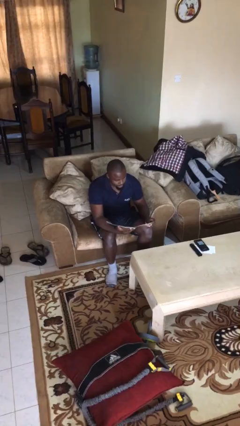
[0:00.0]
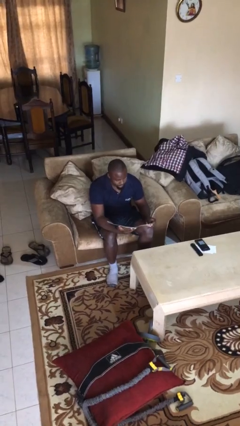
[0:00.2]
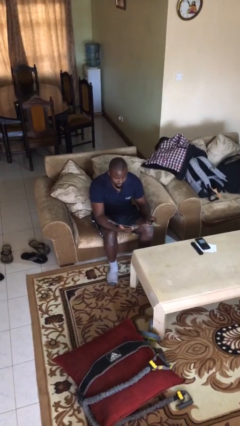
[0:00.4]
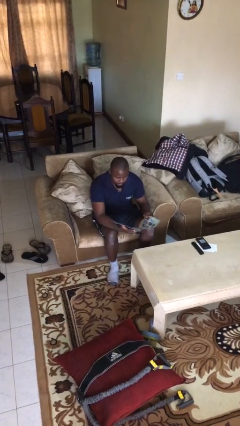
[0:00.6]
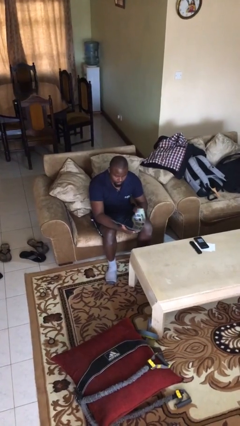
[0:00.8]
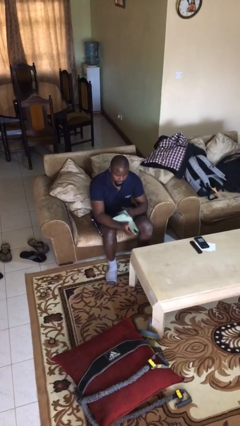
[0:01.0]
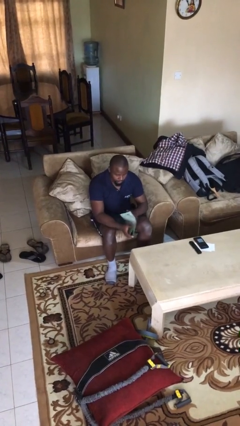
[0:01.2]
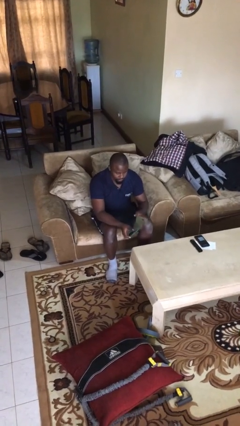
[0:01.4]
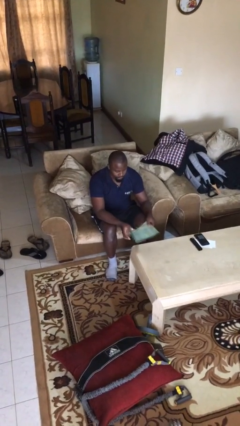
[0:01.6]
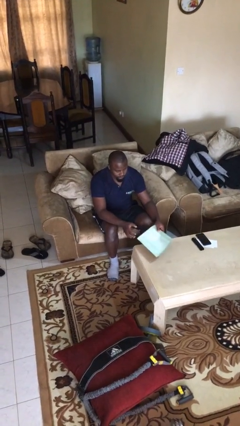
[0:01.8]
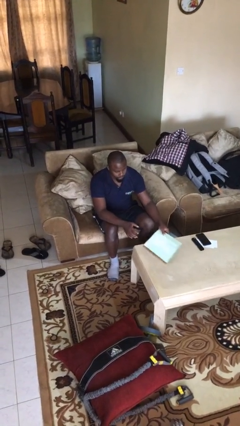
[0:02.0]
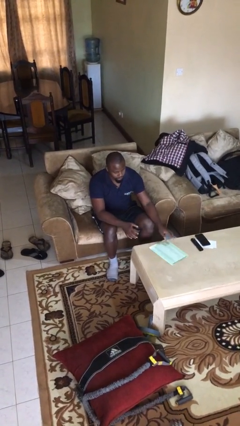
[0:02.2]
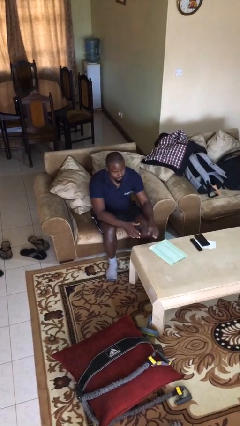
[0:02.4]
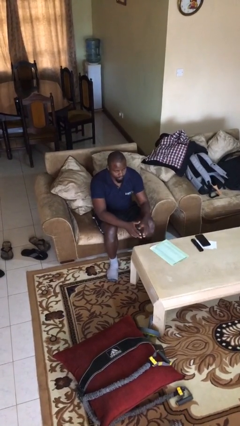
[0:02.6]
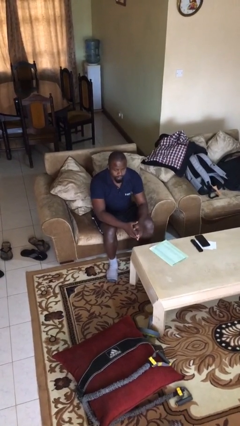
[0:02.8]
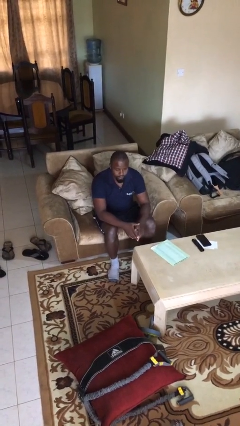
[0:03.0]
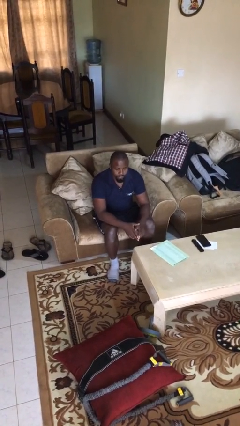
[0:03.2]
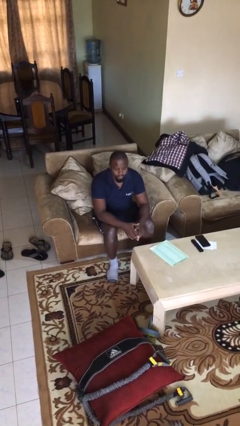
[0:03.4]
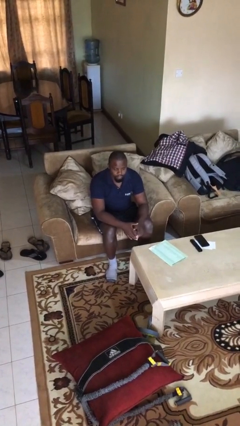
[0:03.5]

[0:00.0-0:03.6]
person puts down object on table

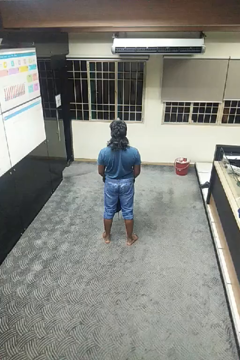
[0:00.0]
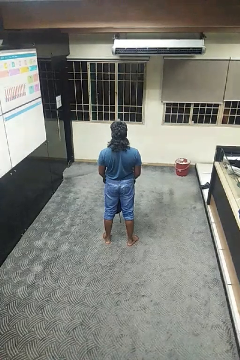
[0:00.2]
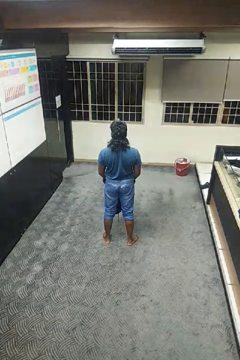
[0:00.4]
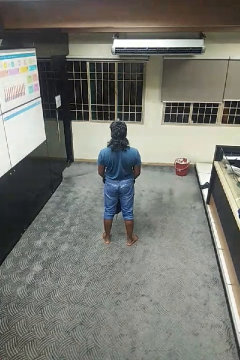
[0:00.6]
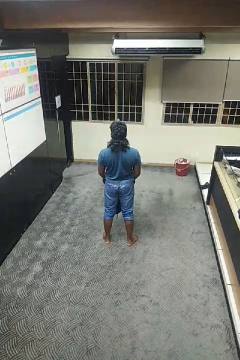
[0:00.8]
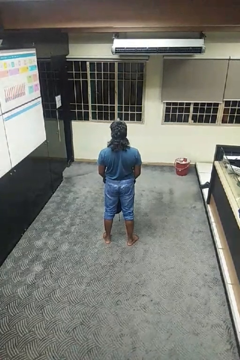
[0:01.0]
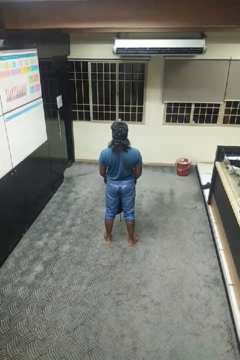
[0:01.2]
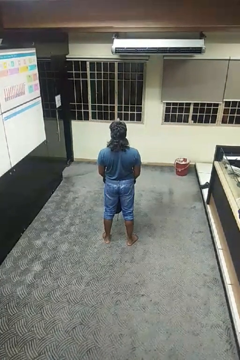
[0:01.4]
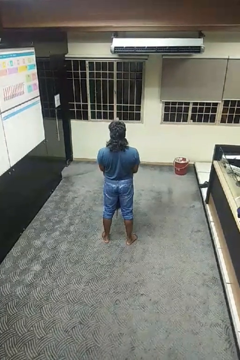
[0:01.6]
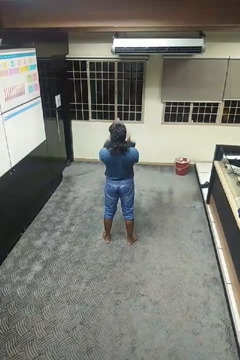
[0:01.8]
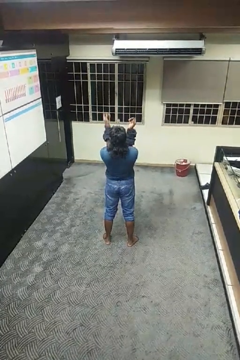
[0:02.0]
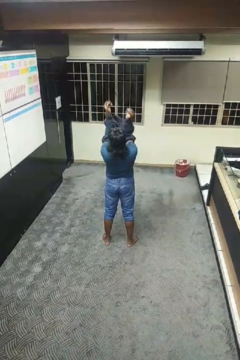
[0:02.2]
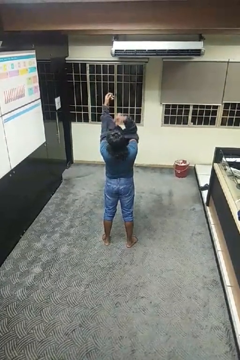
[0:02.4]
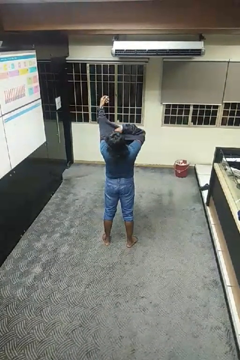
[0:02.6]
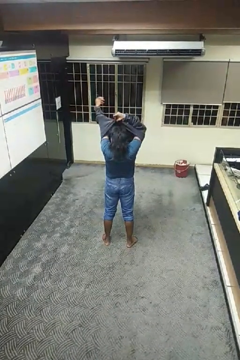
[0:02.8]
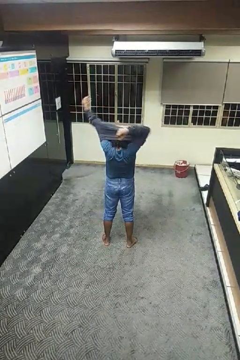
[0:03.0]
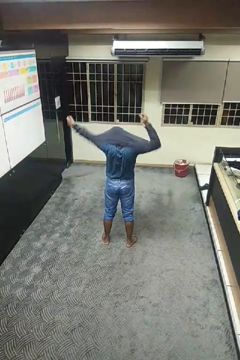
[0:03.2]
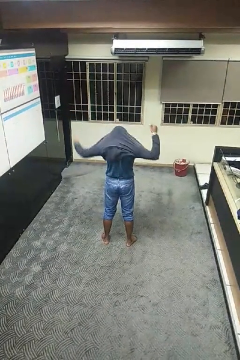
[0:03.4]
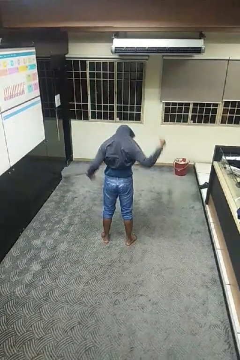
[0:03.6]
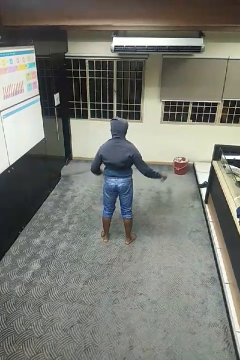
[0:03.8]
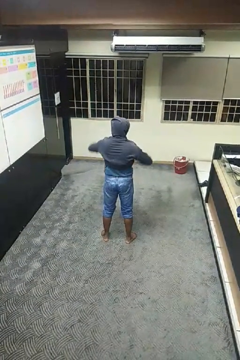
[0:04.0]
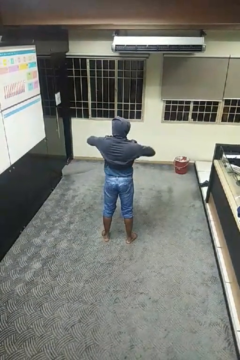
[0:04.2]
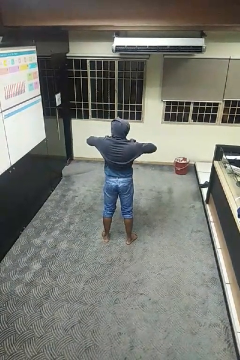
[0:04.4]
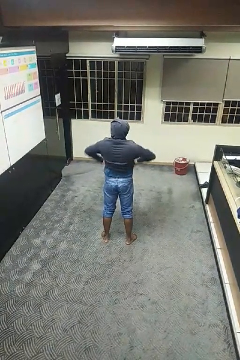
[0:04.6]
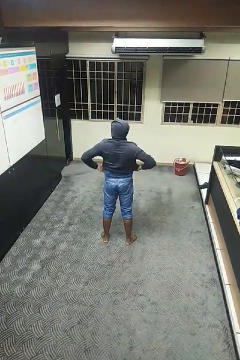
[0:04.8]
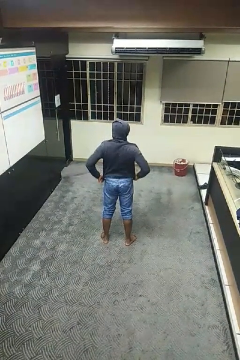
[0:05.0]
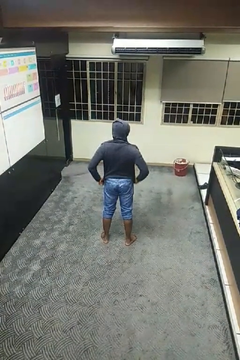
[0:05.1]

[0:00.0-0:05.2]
person puts on hoodie

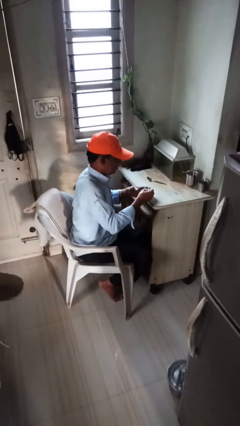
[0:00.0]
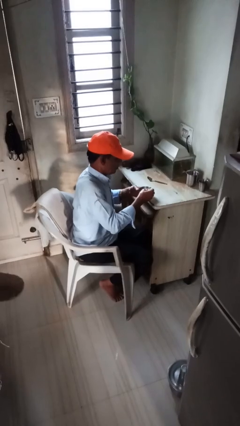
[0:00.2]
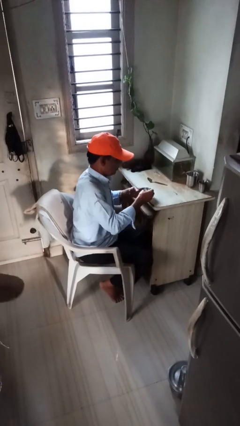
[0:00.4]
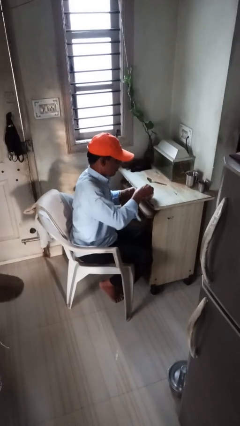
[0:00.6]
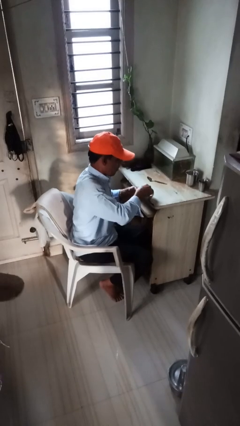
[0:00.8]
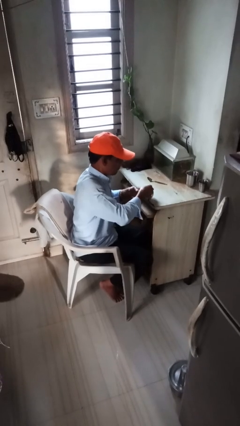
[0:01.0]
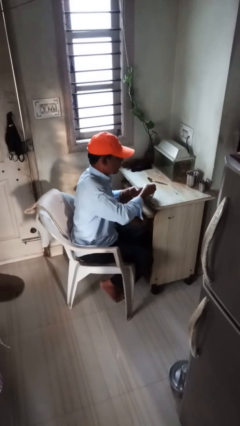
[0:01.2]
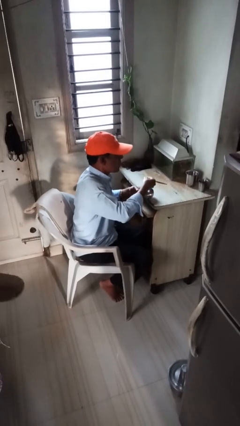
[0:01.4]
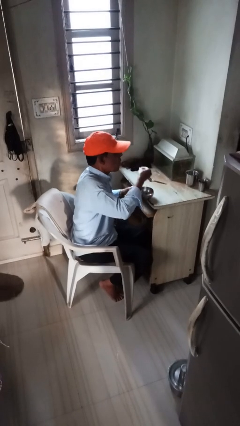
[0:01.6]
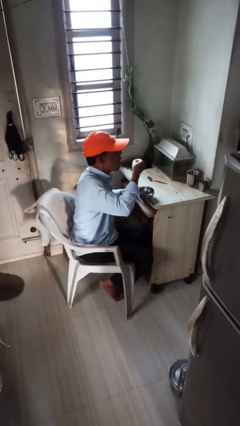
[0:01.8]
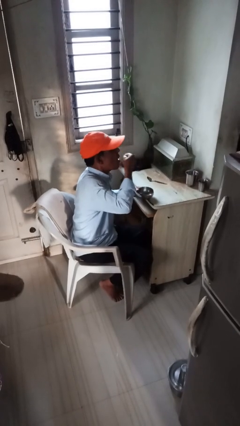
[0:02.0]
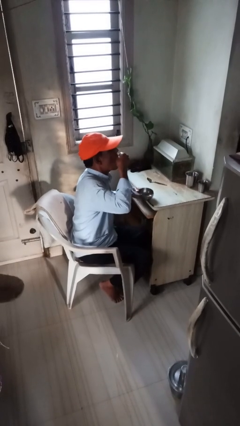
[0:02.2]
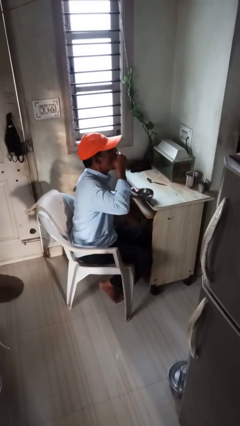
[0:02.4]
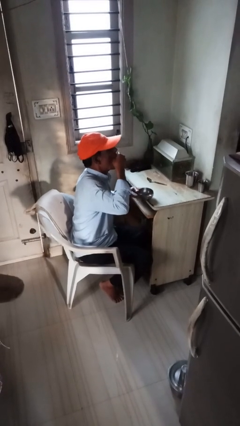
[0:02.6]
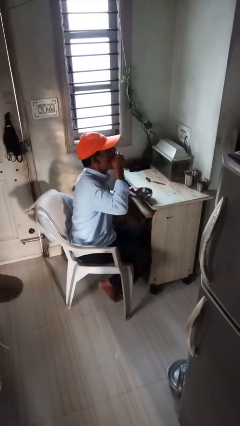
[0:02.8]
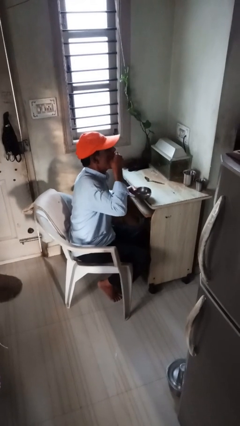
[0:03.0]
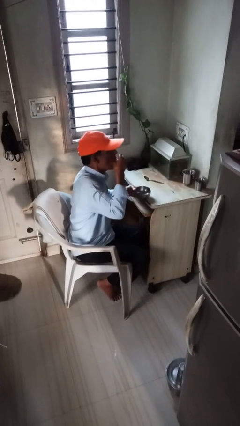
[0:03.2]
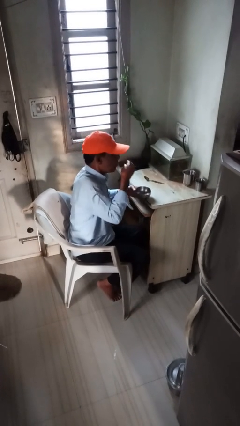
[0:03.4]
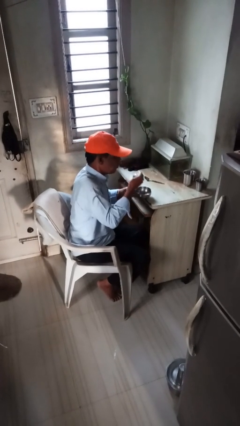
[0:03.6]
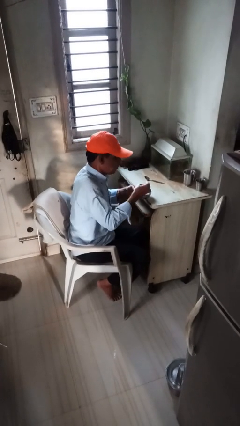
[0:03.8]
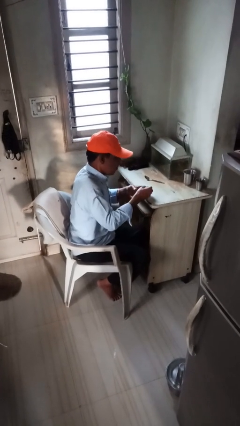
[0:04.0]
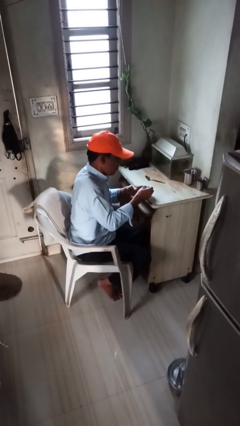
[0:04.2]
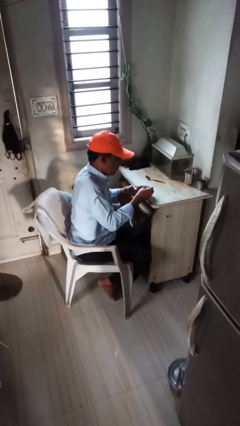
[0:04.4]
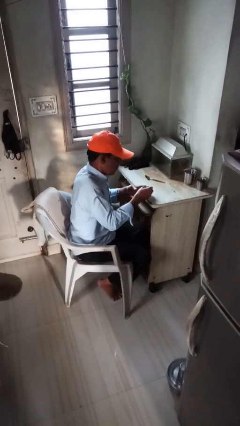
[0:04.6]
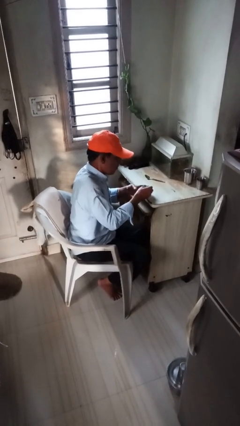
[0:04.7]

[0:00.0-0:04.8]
person eats with hands

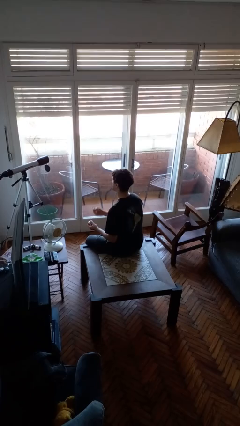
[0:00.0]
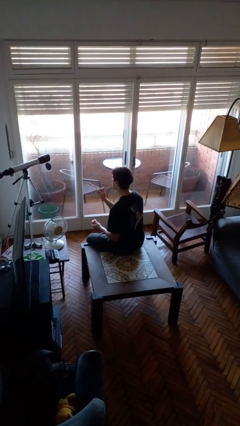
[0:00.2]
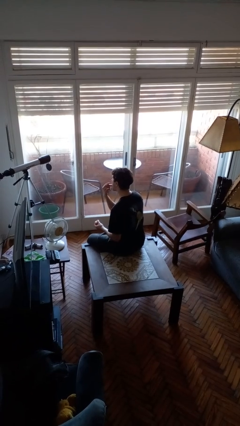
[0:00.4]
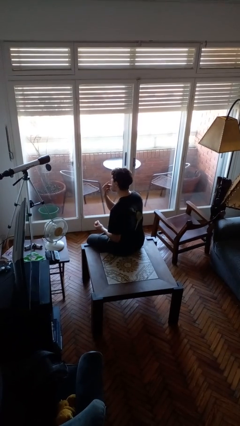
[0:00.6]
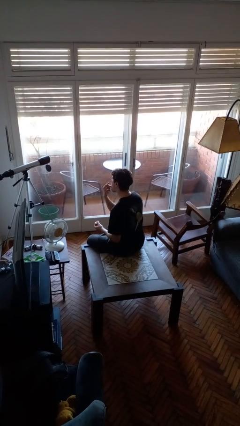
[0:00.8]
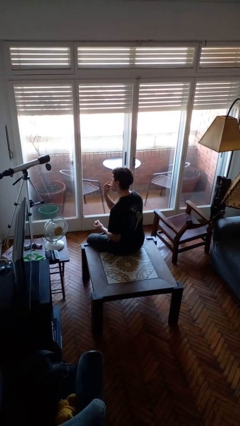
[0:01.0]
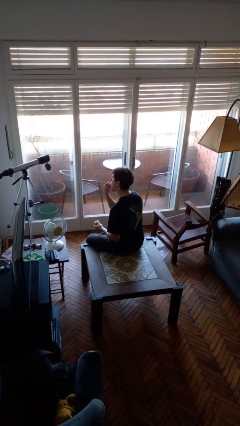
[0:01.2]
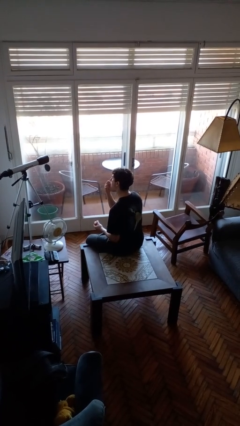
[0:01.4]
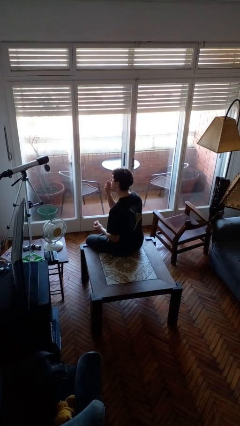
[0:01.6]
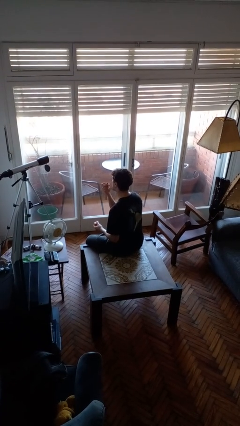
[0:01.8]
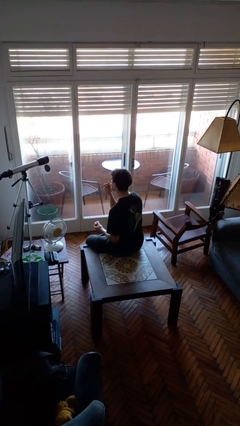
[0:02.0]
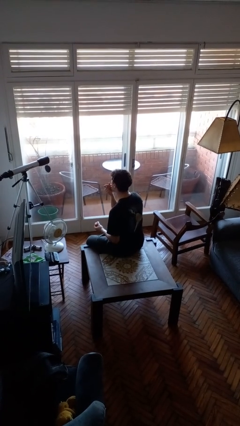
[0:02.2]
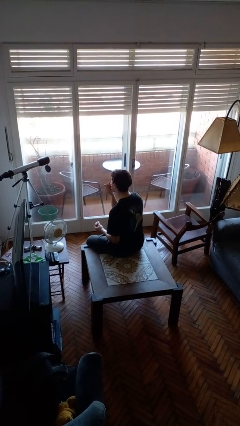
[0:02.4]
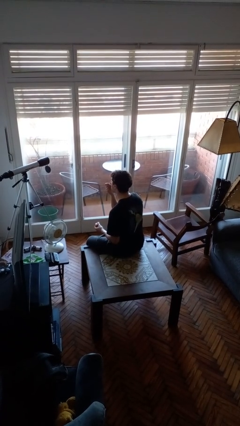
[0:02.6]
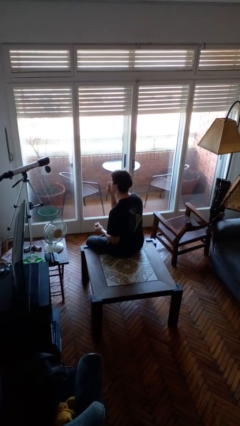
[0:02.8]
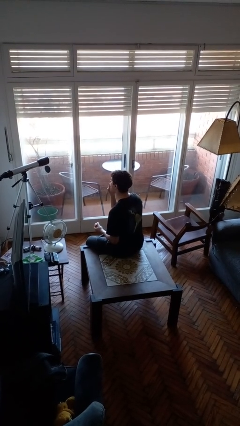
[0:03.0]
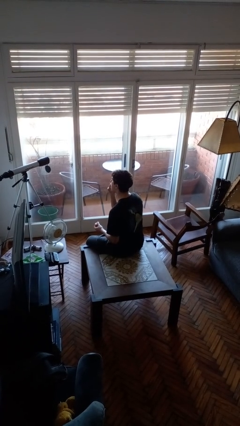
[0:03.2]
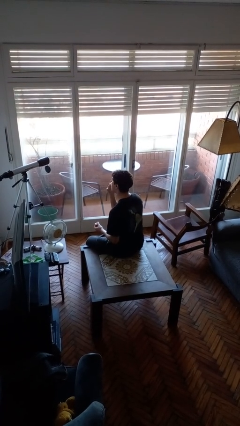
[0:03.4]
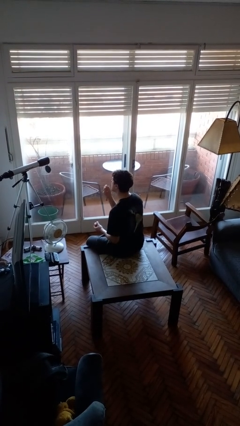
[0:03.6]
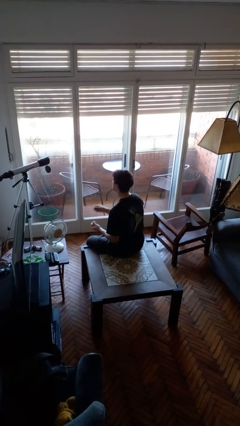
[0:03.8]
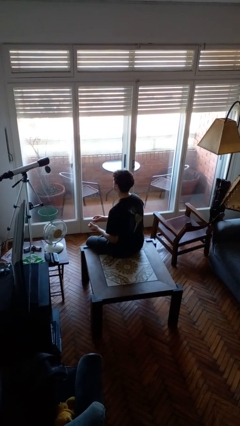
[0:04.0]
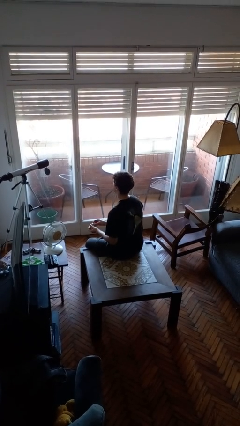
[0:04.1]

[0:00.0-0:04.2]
person applies lip makeup

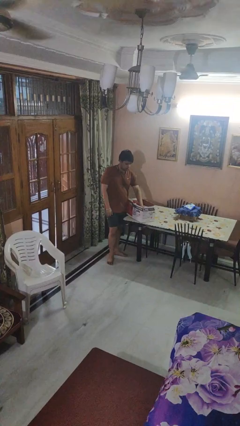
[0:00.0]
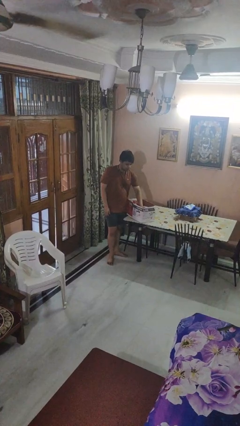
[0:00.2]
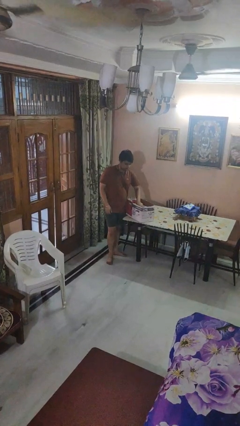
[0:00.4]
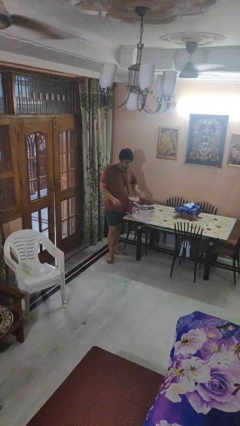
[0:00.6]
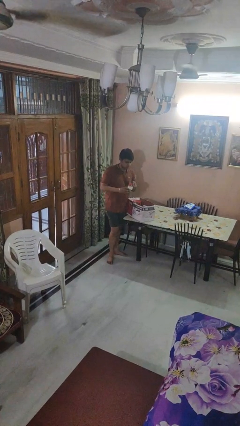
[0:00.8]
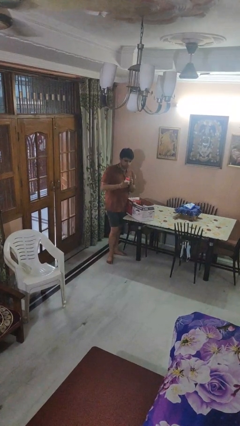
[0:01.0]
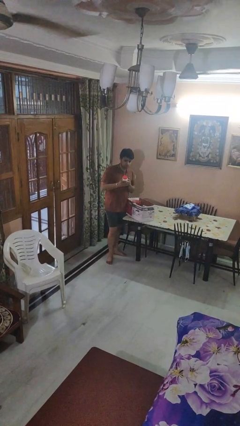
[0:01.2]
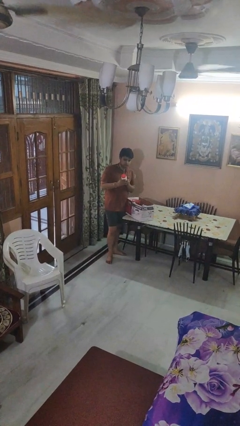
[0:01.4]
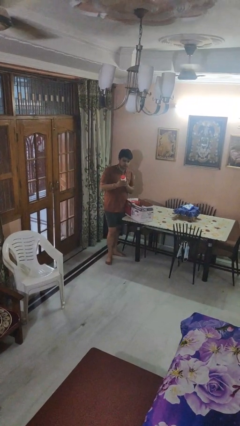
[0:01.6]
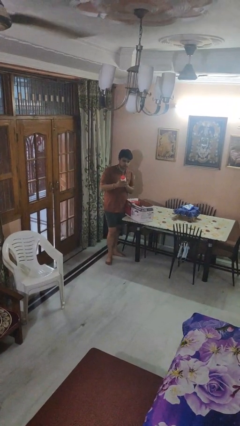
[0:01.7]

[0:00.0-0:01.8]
person takes object from box
